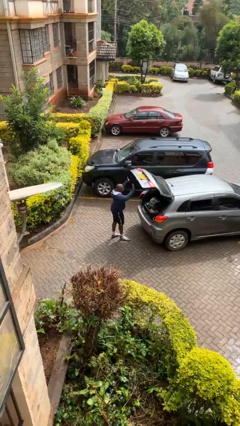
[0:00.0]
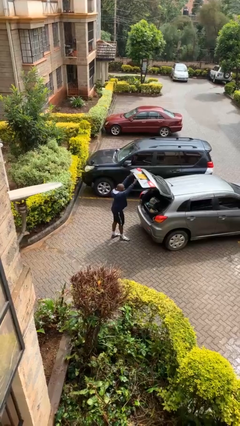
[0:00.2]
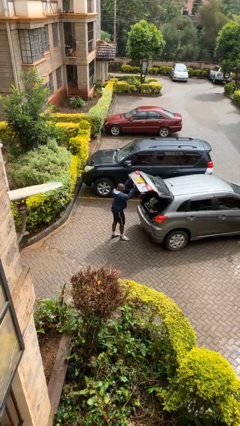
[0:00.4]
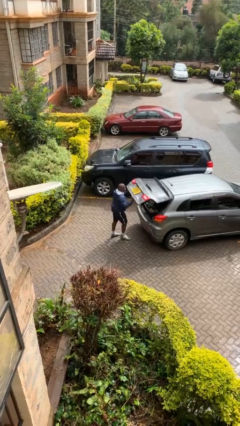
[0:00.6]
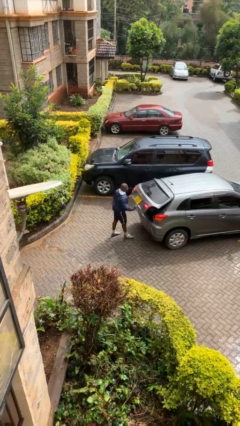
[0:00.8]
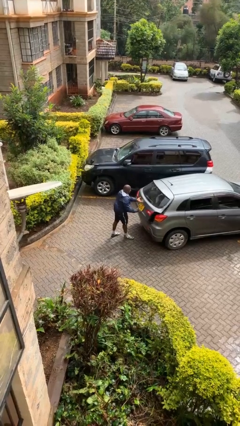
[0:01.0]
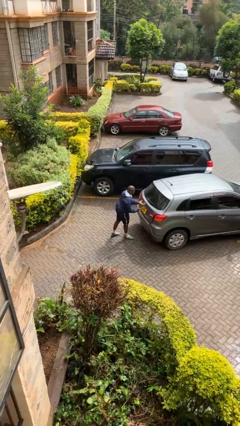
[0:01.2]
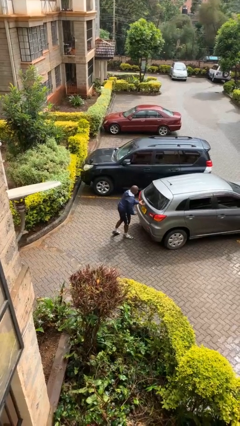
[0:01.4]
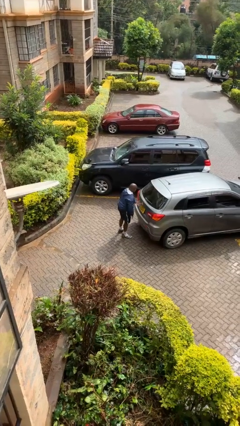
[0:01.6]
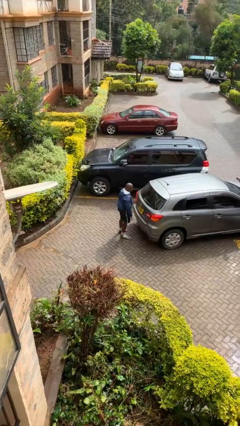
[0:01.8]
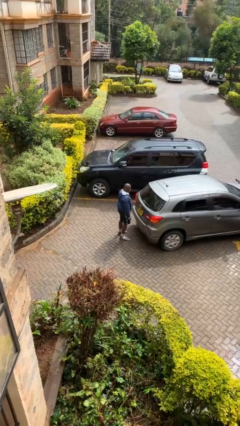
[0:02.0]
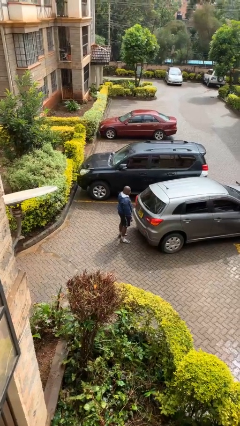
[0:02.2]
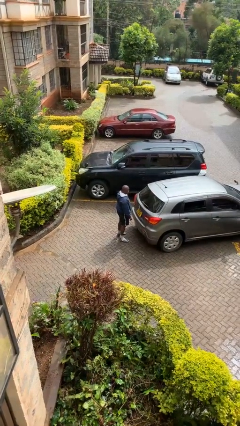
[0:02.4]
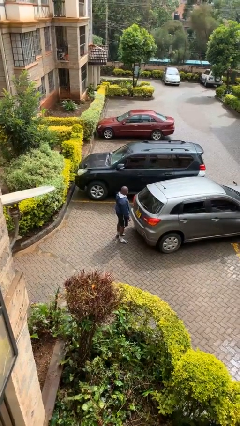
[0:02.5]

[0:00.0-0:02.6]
person closes car trunk

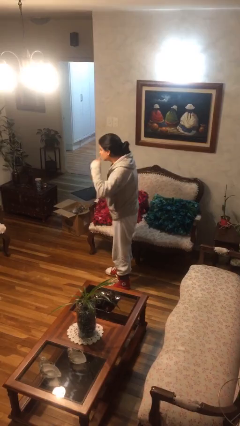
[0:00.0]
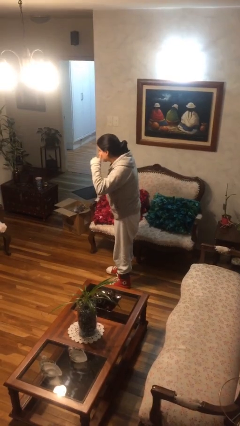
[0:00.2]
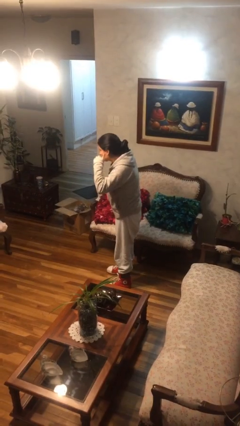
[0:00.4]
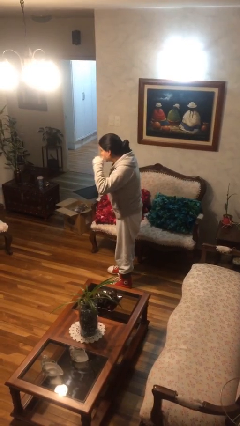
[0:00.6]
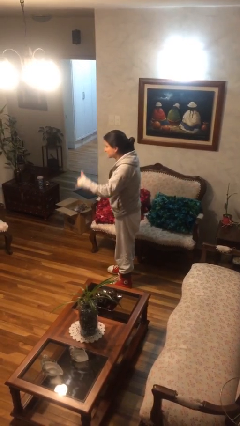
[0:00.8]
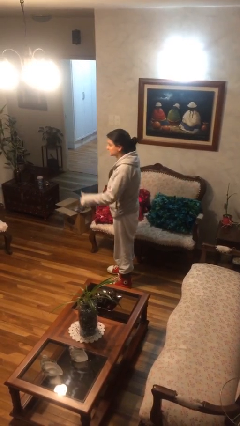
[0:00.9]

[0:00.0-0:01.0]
person gestures call me

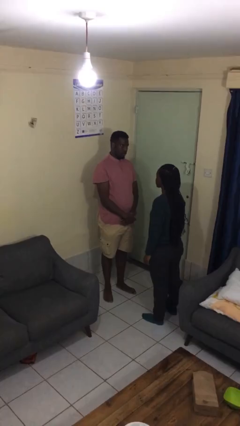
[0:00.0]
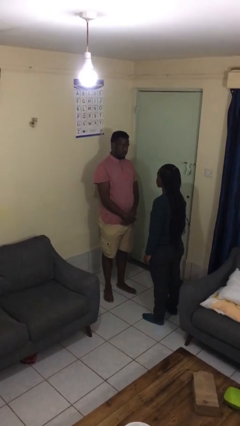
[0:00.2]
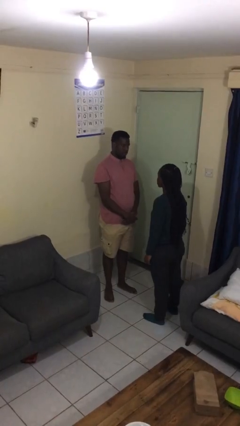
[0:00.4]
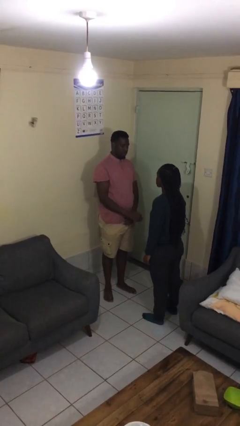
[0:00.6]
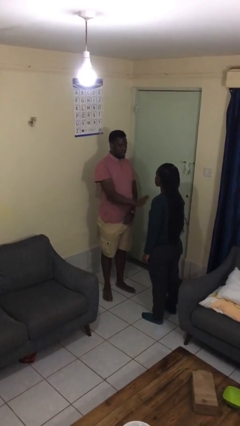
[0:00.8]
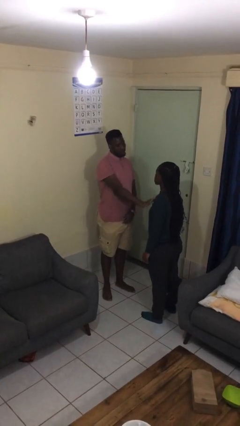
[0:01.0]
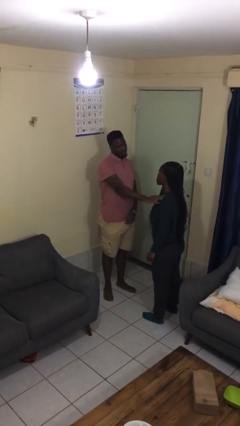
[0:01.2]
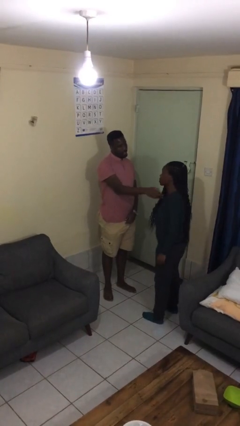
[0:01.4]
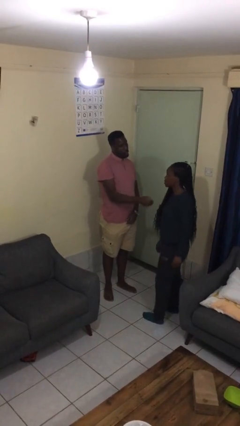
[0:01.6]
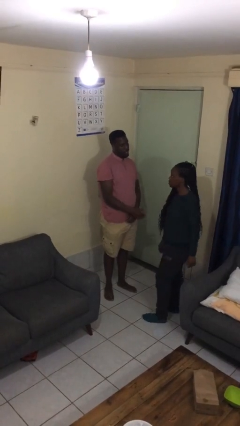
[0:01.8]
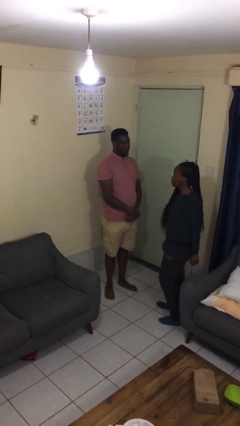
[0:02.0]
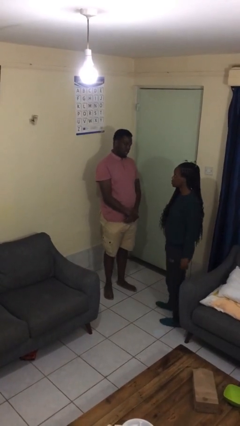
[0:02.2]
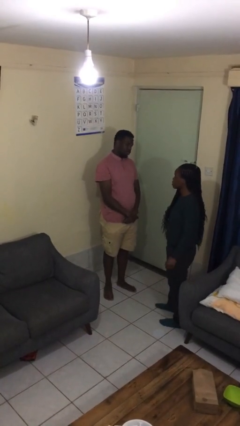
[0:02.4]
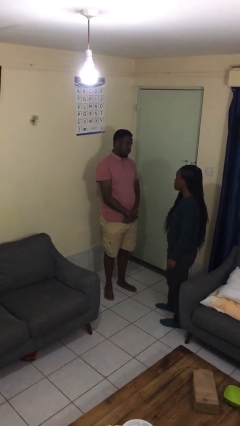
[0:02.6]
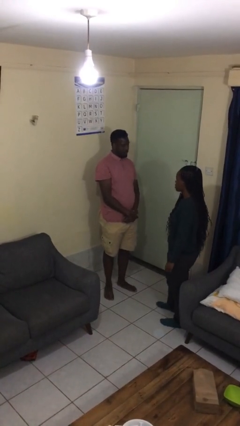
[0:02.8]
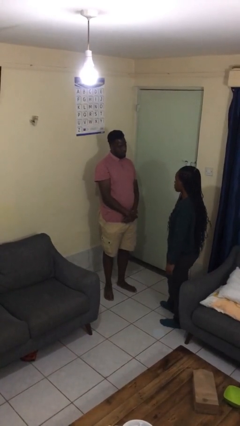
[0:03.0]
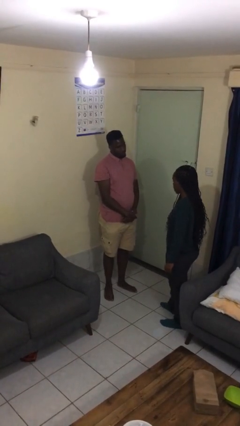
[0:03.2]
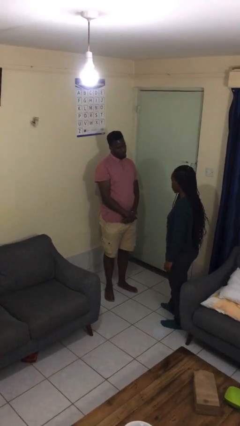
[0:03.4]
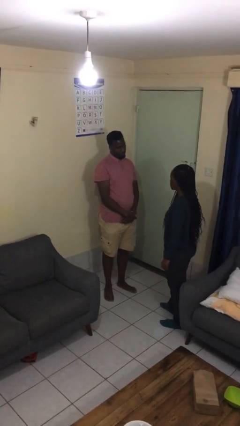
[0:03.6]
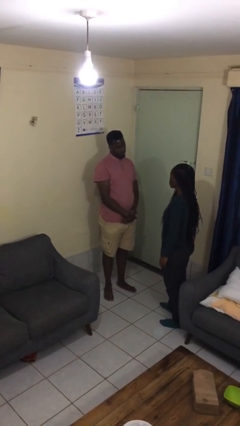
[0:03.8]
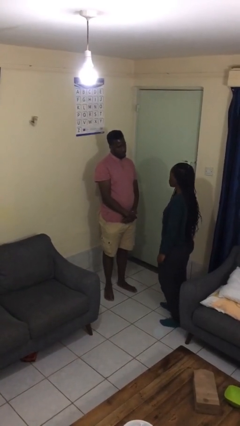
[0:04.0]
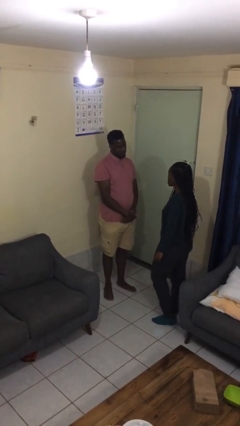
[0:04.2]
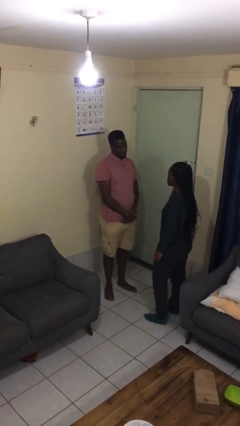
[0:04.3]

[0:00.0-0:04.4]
person shoves person

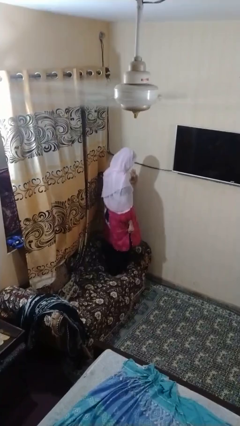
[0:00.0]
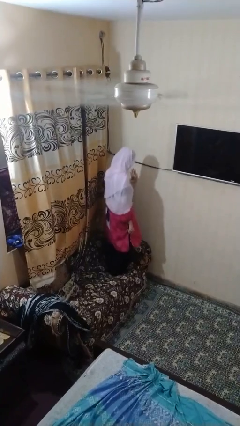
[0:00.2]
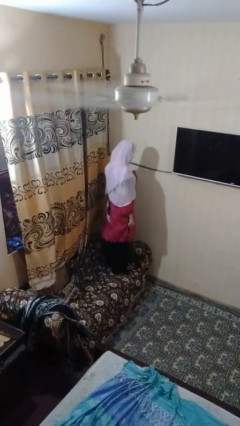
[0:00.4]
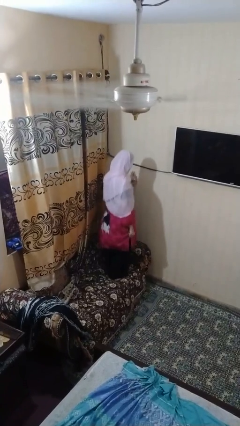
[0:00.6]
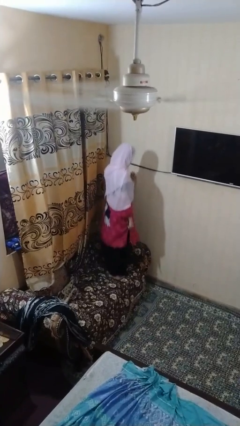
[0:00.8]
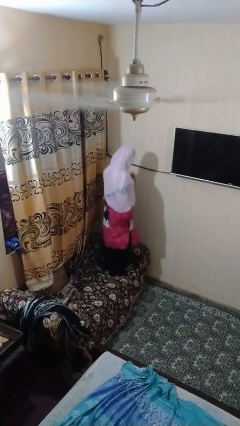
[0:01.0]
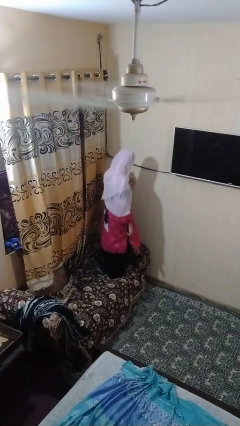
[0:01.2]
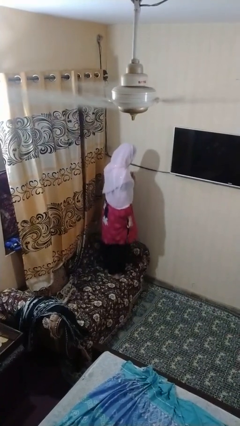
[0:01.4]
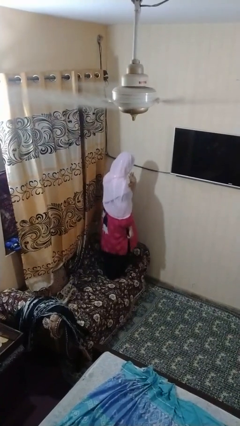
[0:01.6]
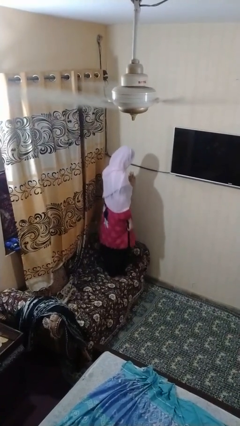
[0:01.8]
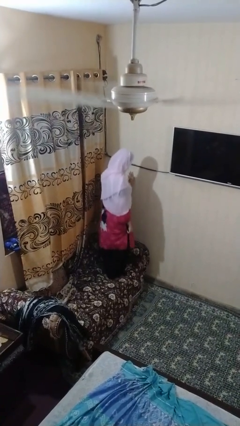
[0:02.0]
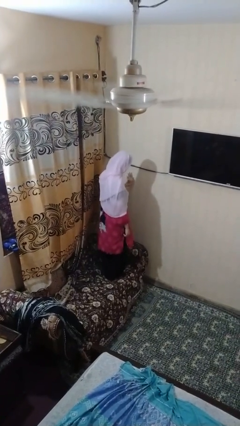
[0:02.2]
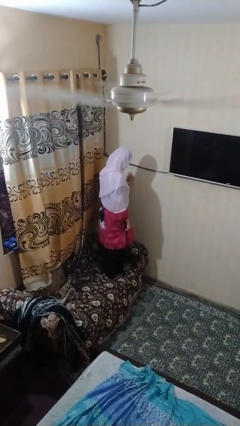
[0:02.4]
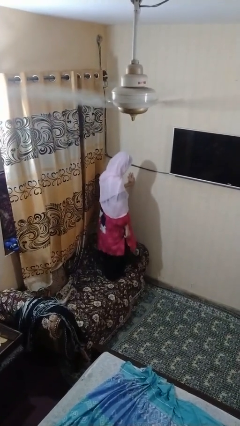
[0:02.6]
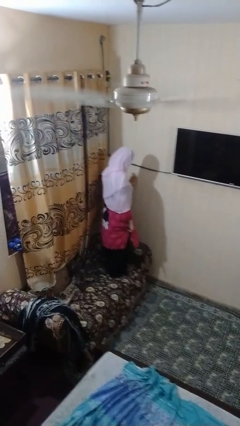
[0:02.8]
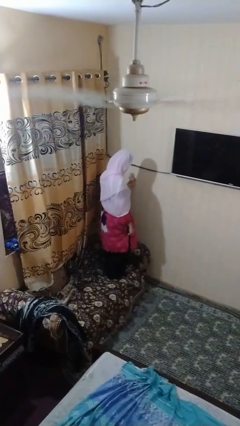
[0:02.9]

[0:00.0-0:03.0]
person jumps on couch

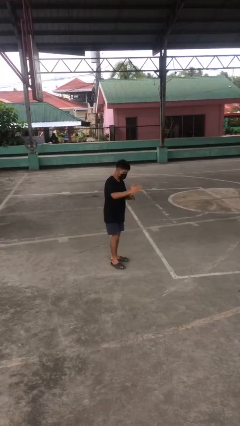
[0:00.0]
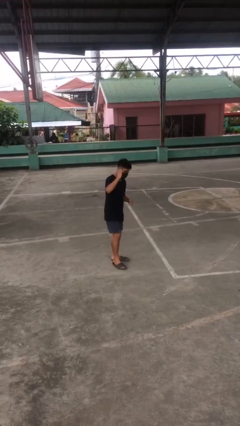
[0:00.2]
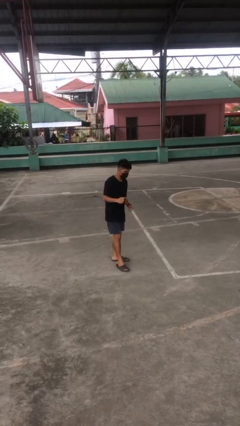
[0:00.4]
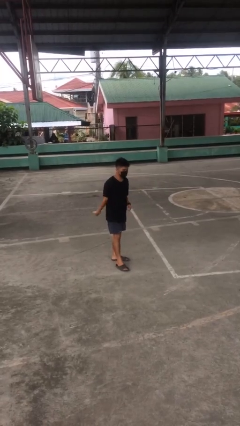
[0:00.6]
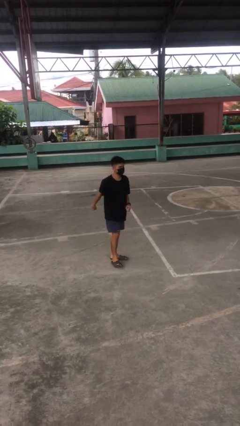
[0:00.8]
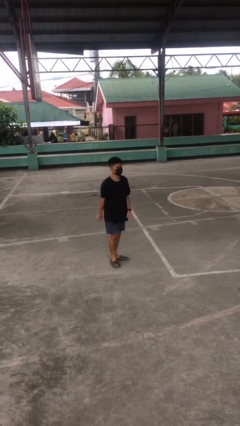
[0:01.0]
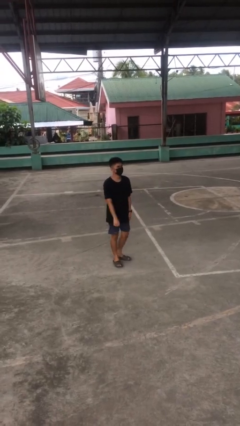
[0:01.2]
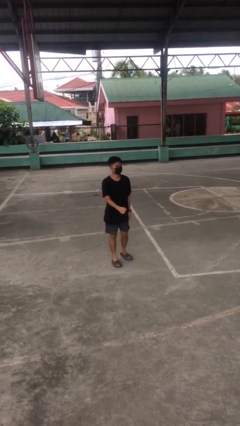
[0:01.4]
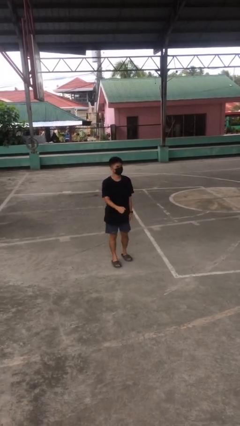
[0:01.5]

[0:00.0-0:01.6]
person karate chop

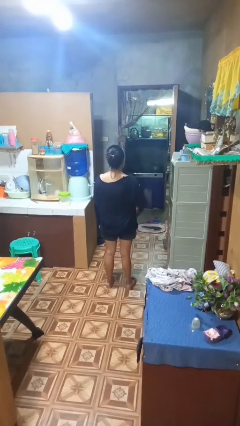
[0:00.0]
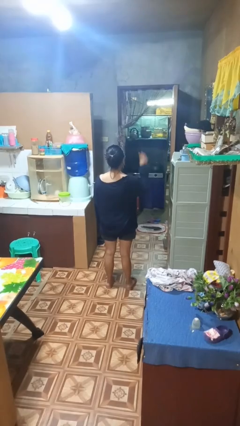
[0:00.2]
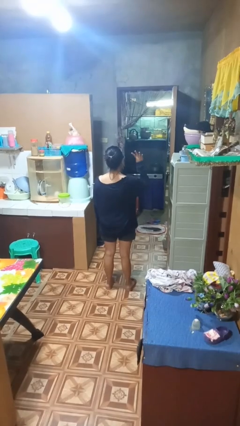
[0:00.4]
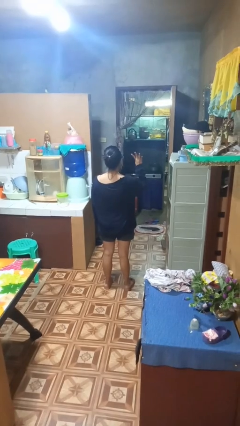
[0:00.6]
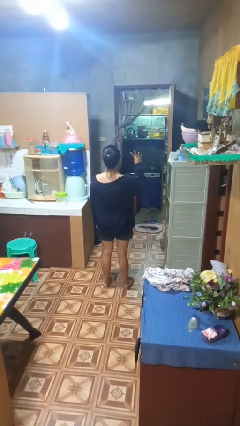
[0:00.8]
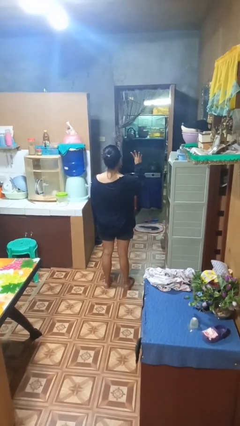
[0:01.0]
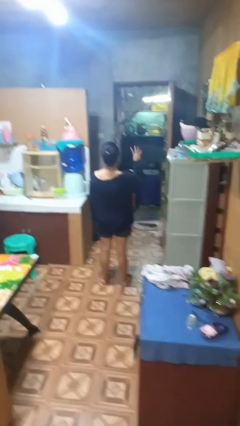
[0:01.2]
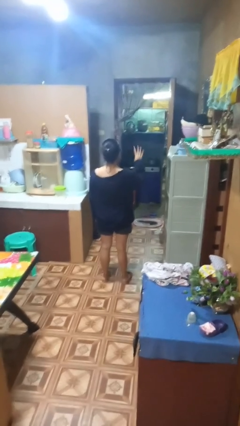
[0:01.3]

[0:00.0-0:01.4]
person gestures number four

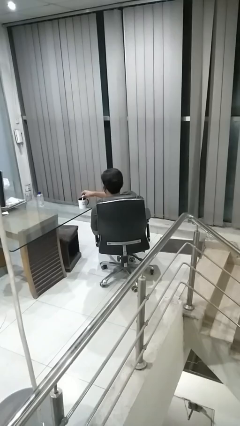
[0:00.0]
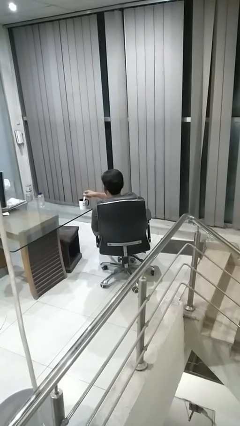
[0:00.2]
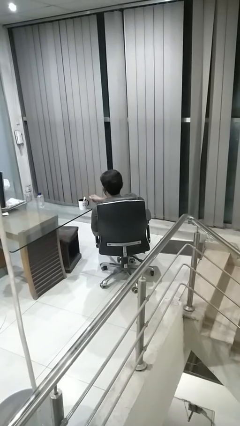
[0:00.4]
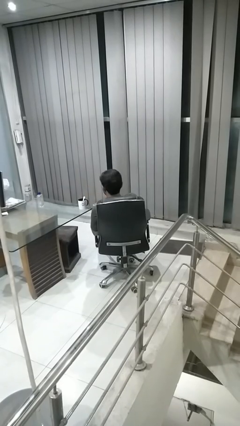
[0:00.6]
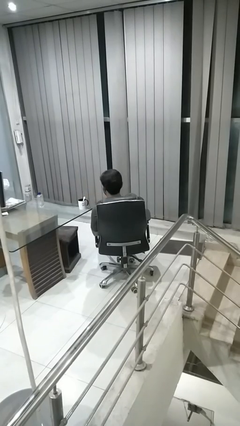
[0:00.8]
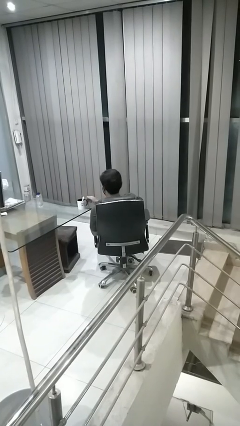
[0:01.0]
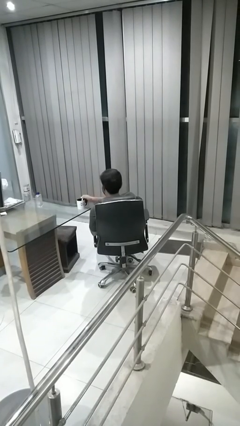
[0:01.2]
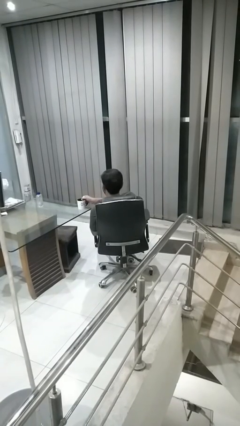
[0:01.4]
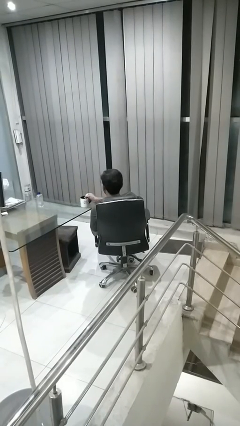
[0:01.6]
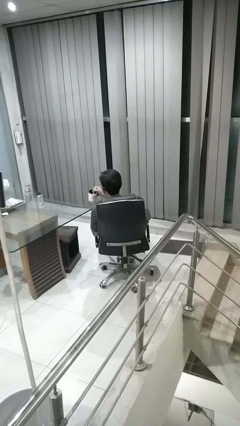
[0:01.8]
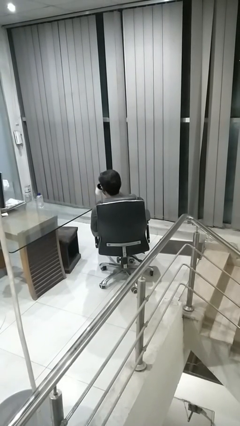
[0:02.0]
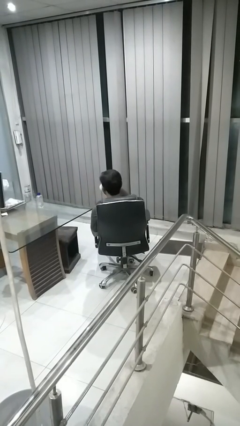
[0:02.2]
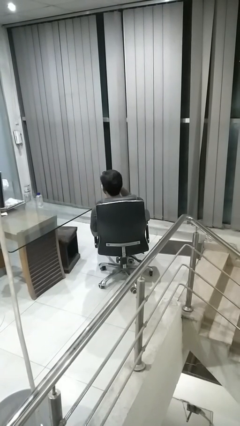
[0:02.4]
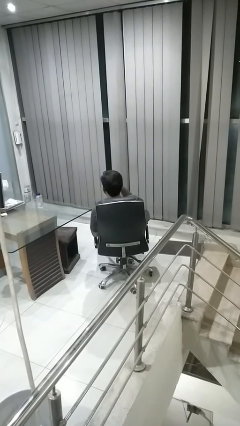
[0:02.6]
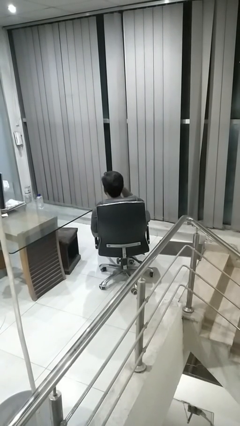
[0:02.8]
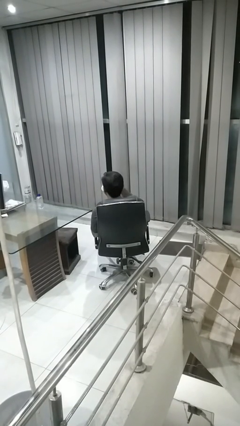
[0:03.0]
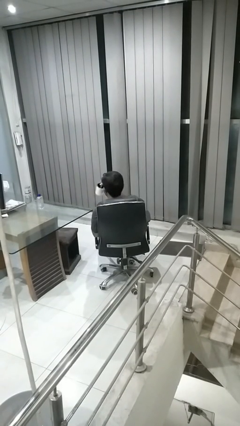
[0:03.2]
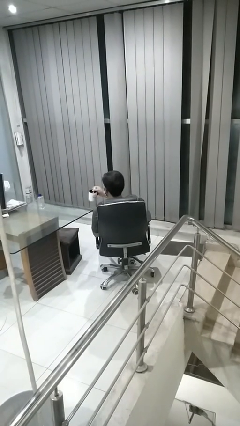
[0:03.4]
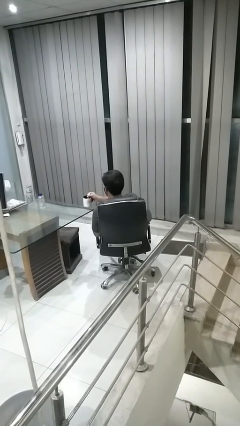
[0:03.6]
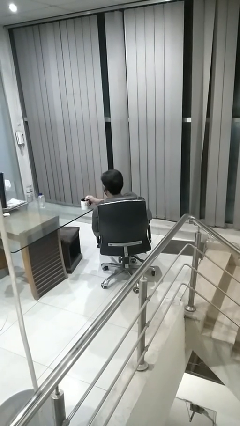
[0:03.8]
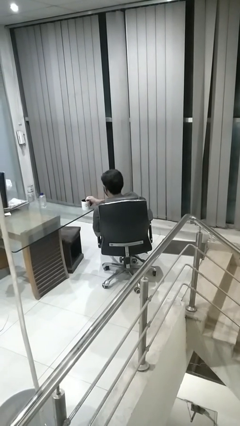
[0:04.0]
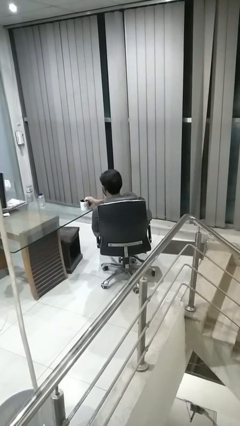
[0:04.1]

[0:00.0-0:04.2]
person drinks from mug
